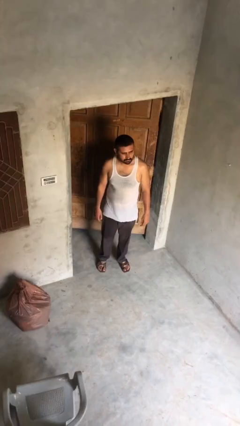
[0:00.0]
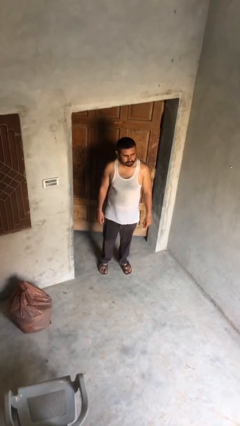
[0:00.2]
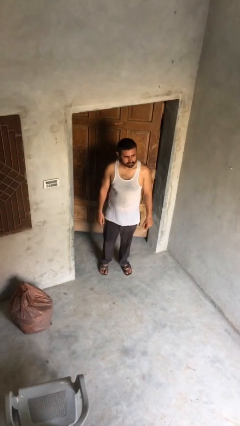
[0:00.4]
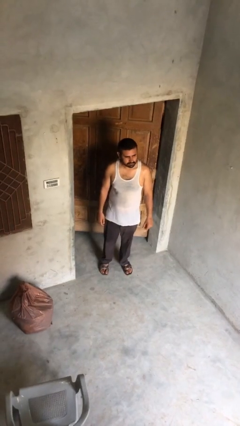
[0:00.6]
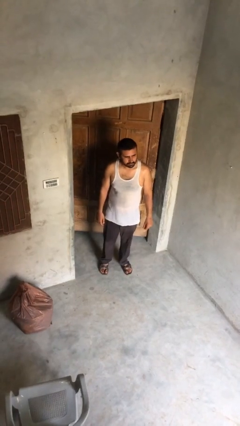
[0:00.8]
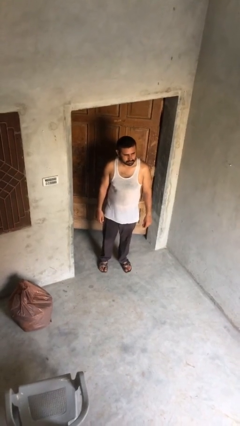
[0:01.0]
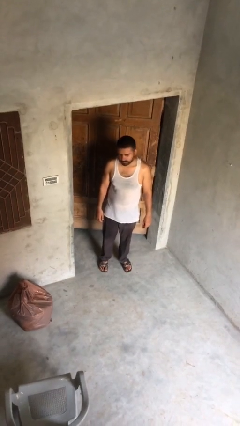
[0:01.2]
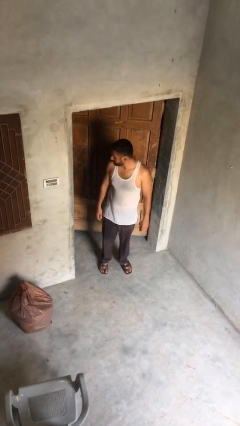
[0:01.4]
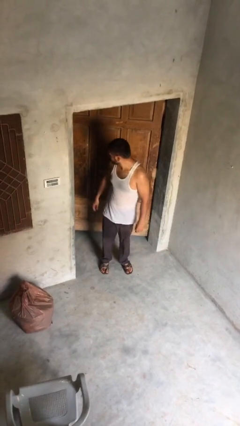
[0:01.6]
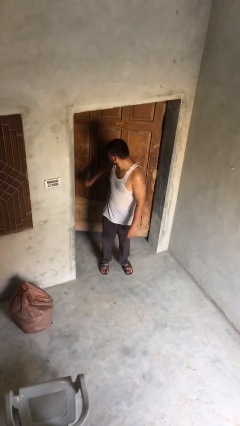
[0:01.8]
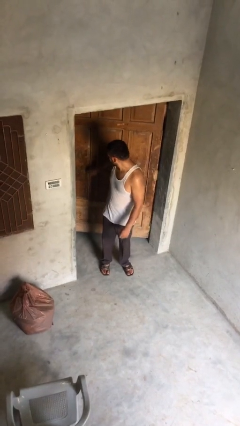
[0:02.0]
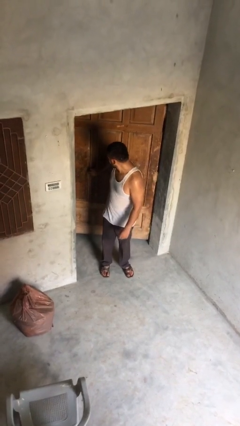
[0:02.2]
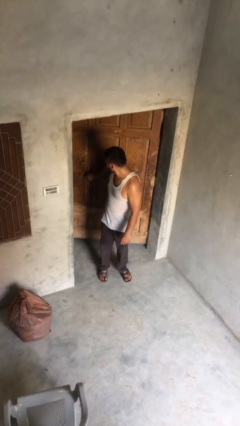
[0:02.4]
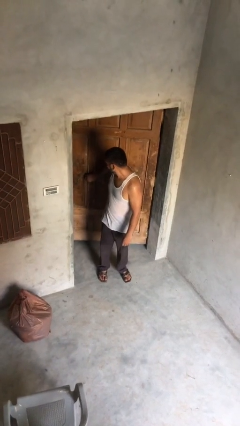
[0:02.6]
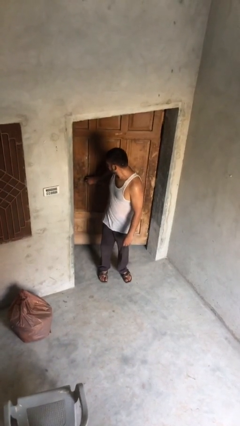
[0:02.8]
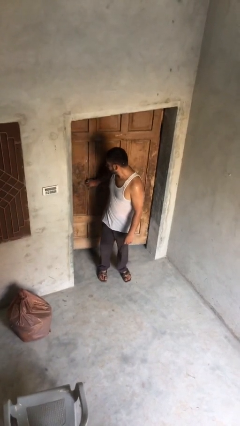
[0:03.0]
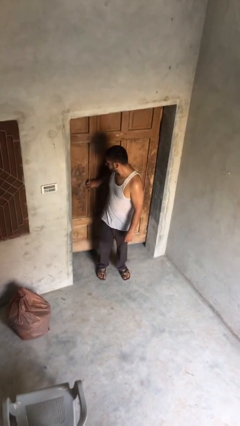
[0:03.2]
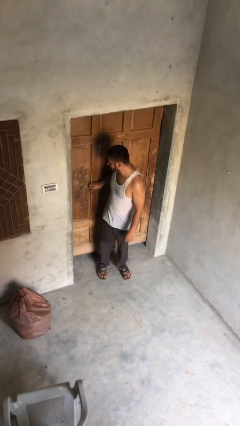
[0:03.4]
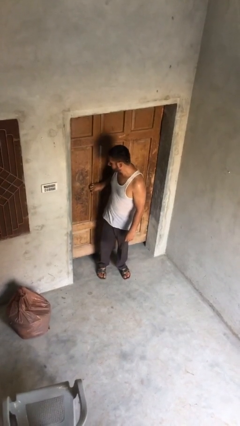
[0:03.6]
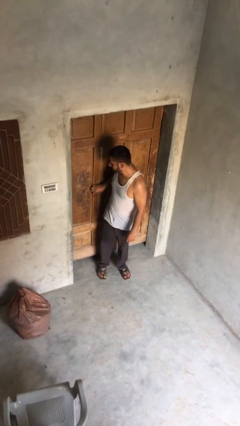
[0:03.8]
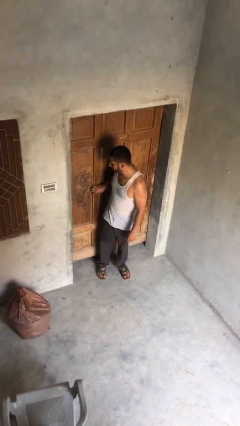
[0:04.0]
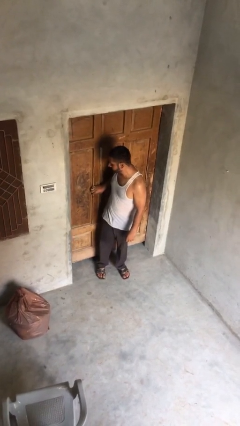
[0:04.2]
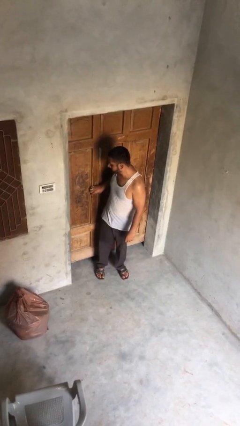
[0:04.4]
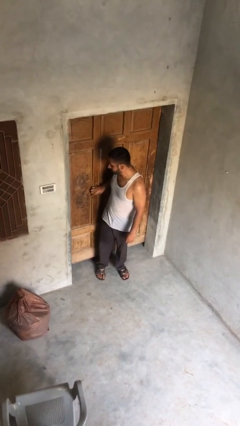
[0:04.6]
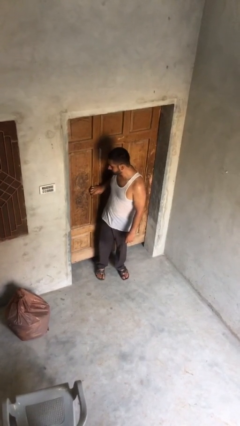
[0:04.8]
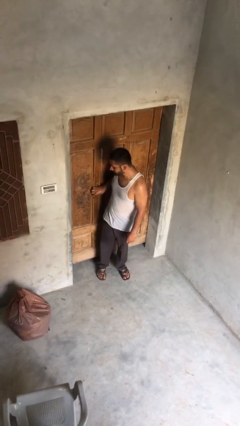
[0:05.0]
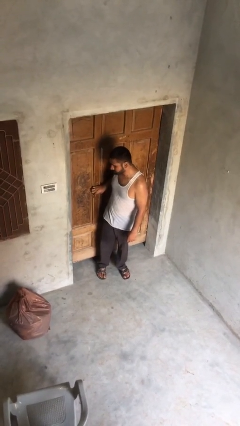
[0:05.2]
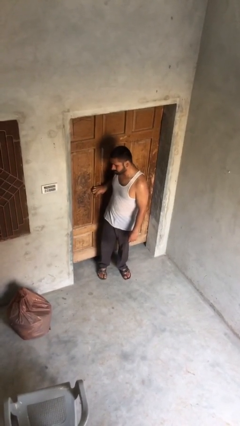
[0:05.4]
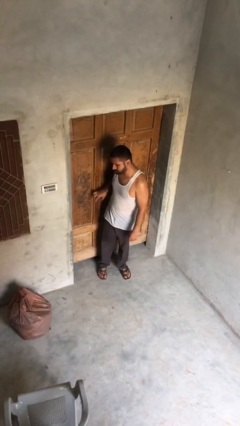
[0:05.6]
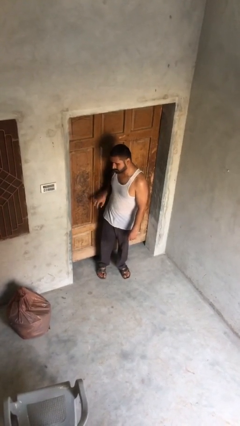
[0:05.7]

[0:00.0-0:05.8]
person closes facility door

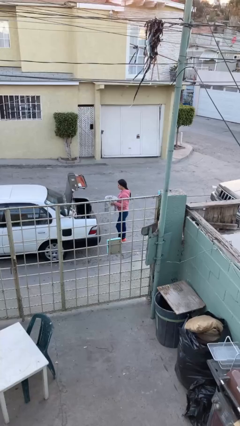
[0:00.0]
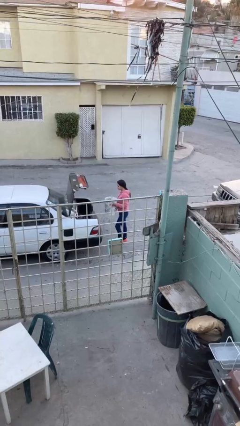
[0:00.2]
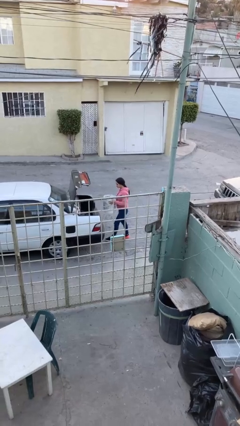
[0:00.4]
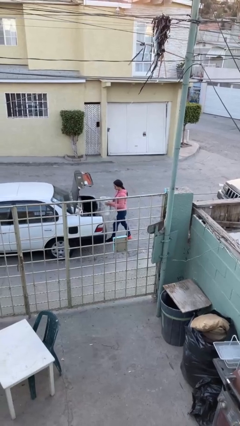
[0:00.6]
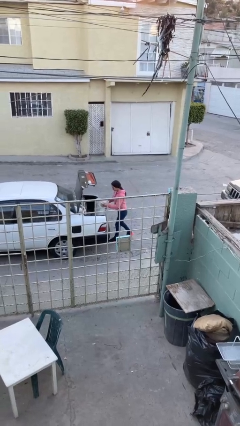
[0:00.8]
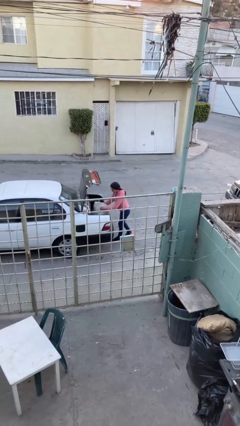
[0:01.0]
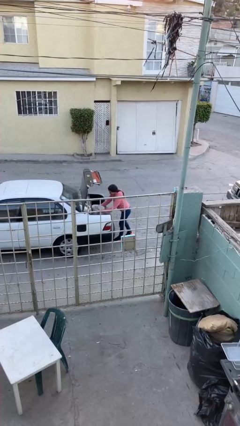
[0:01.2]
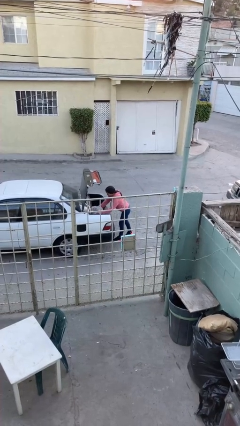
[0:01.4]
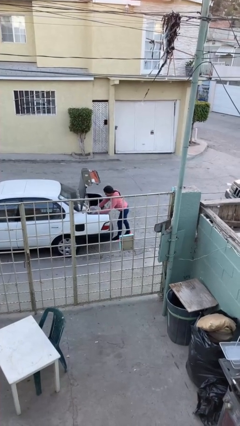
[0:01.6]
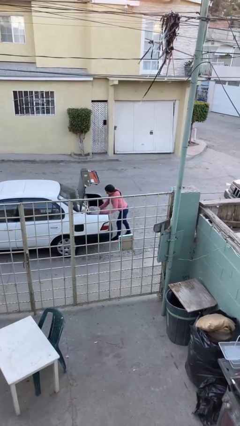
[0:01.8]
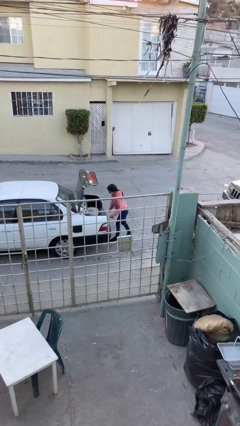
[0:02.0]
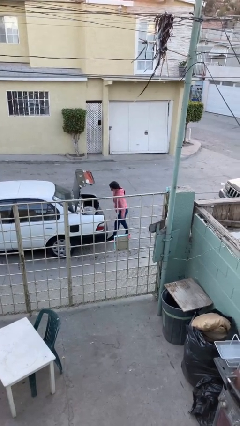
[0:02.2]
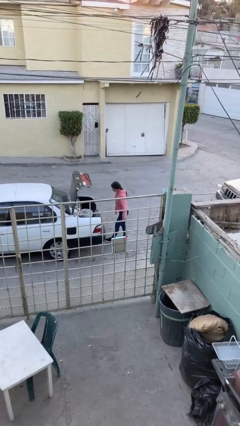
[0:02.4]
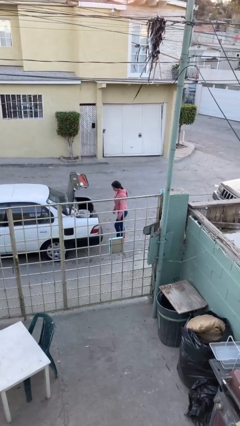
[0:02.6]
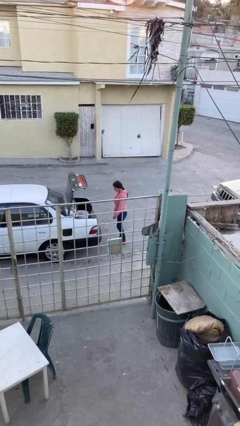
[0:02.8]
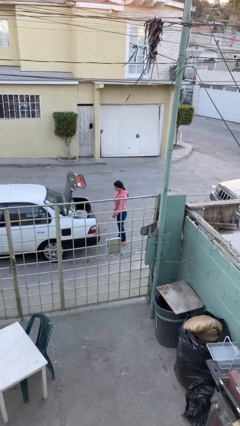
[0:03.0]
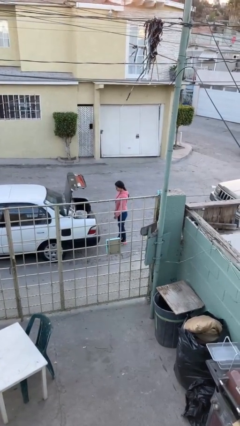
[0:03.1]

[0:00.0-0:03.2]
person loads car

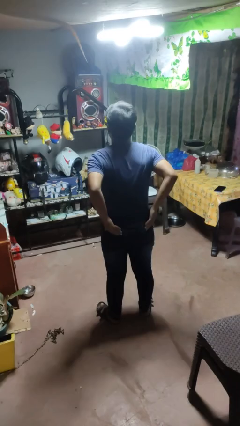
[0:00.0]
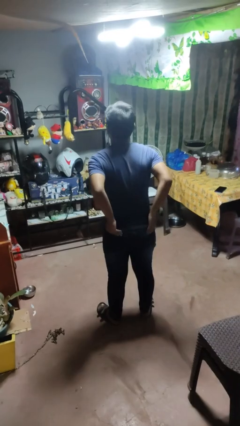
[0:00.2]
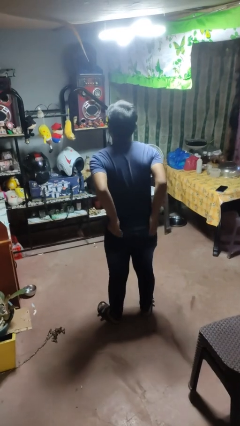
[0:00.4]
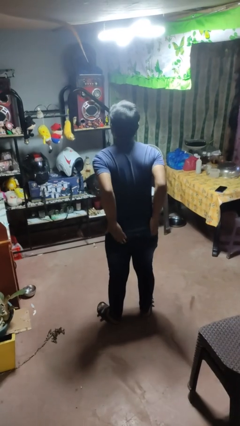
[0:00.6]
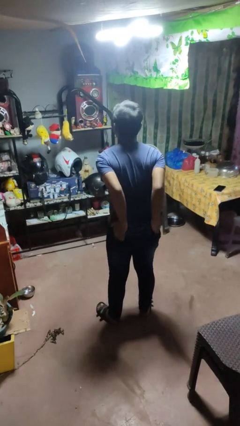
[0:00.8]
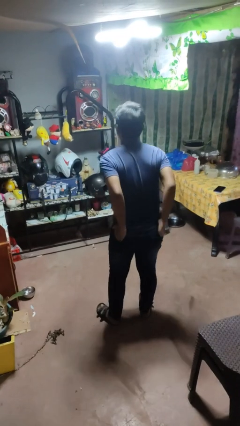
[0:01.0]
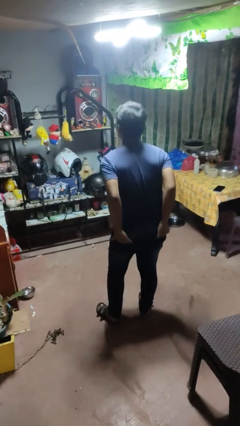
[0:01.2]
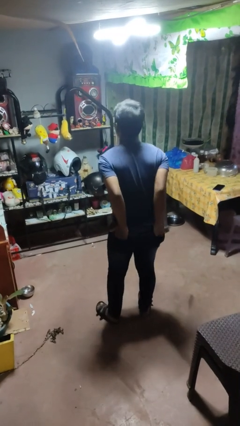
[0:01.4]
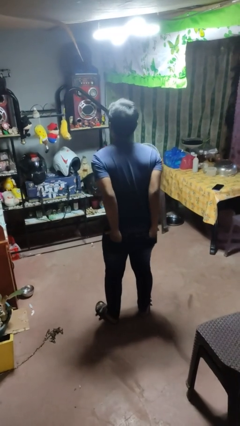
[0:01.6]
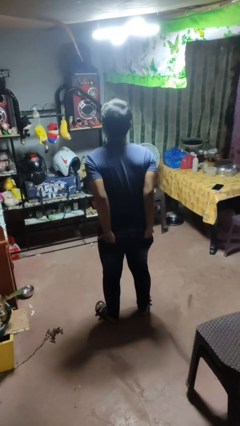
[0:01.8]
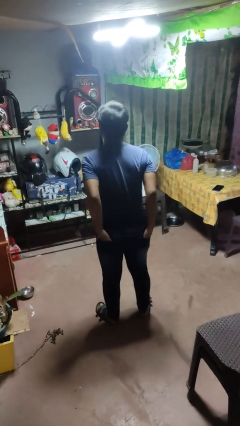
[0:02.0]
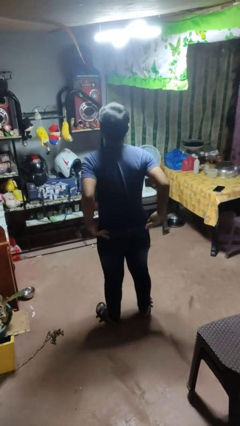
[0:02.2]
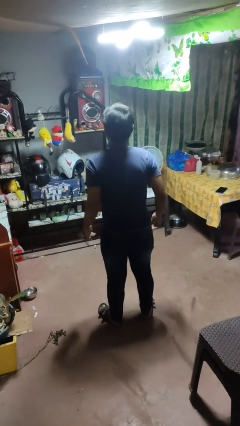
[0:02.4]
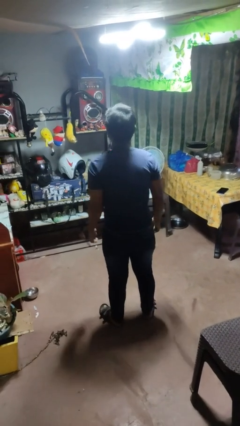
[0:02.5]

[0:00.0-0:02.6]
person puts hands in back pockets

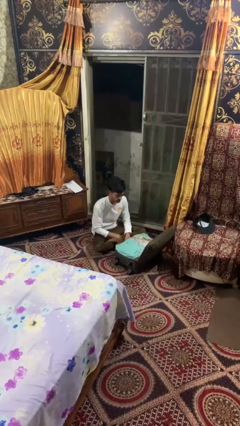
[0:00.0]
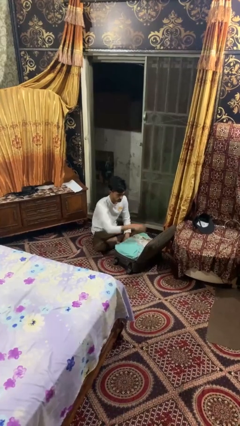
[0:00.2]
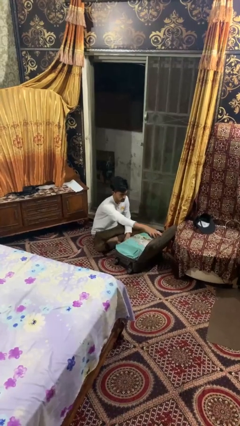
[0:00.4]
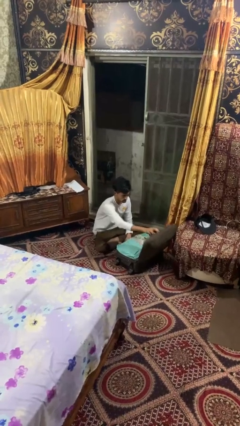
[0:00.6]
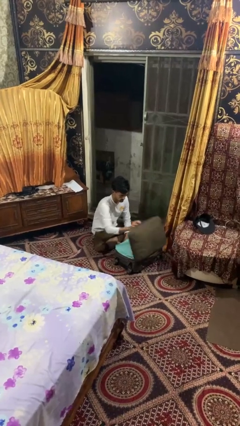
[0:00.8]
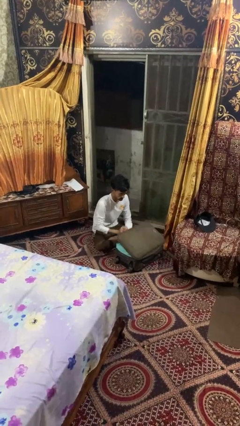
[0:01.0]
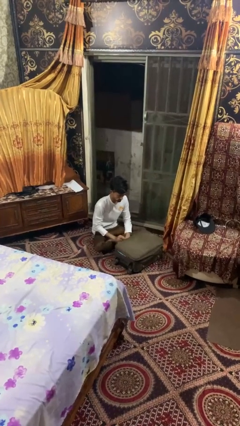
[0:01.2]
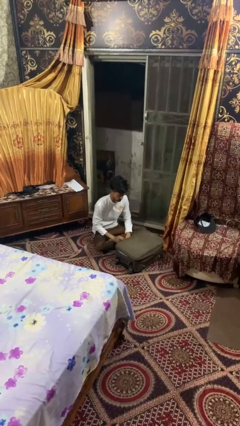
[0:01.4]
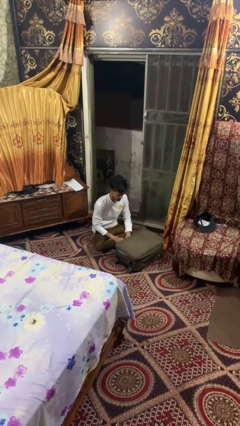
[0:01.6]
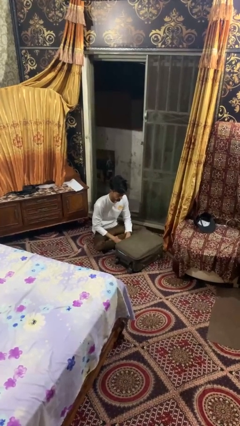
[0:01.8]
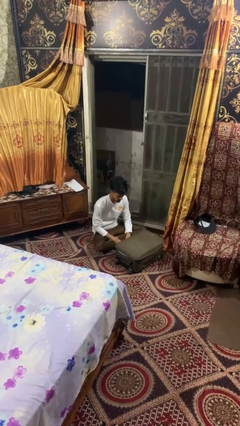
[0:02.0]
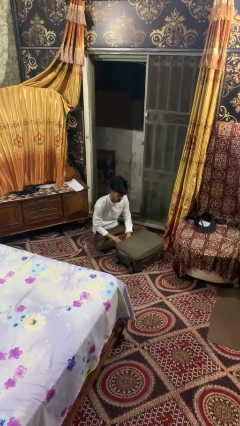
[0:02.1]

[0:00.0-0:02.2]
person closes suitcase

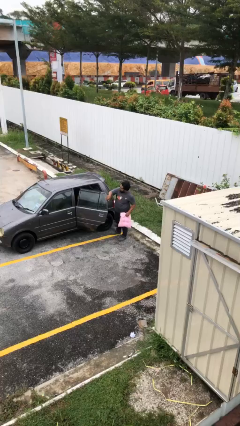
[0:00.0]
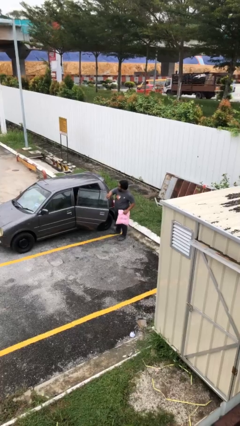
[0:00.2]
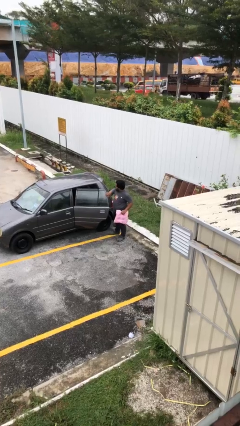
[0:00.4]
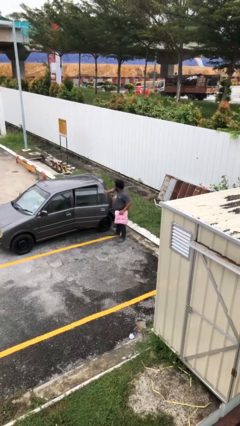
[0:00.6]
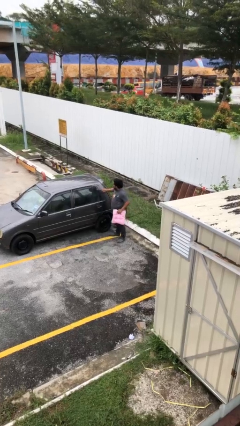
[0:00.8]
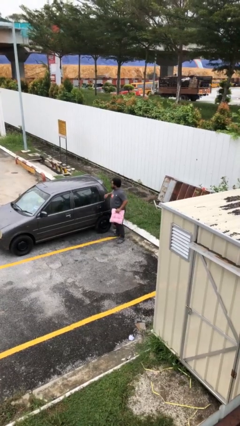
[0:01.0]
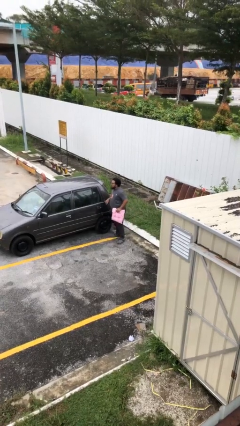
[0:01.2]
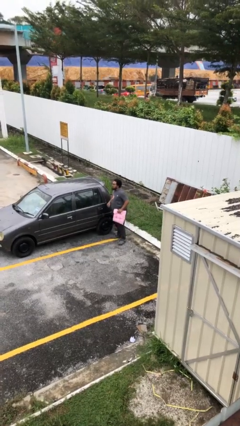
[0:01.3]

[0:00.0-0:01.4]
person closes car door

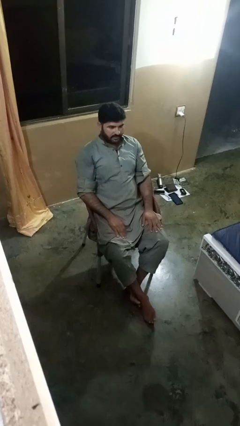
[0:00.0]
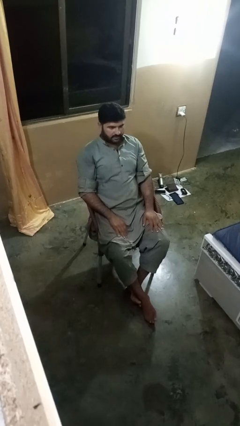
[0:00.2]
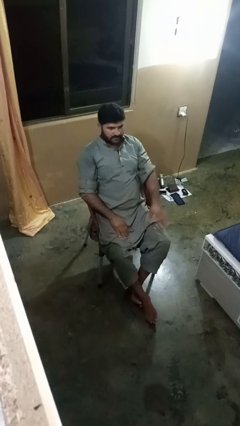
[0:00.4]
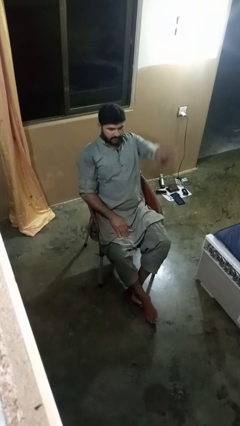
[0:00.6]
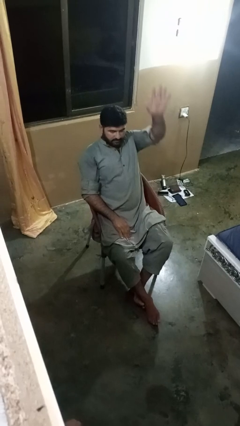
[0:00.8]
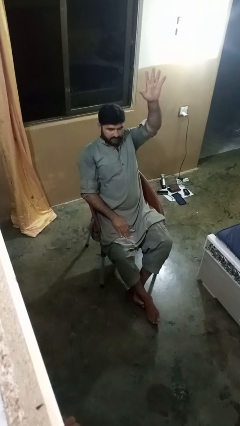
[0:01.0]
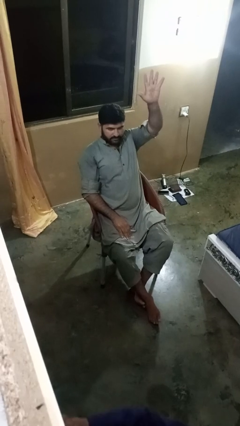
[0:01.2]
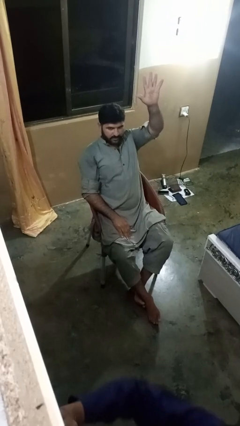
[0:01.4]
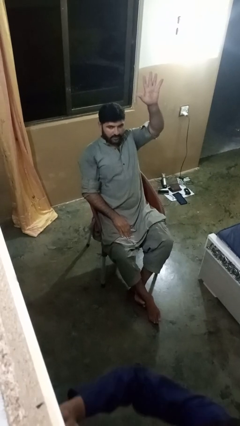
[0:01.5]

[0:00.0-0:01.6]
person gestures number five

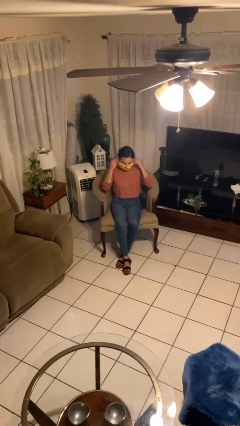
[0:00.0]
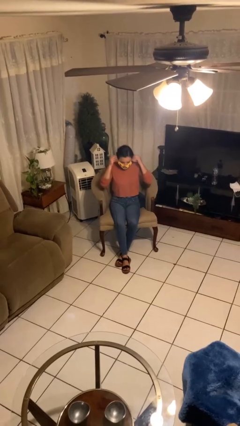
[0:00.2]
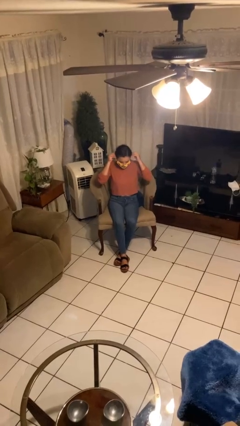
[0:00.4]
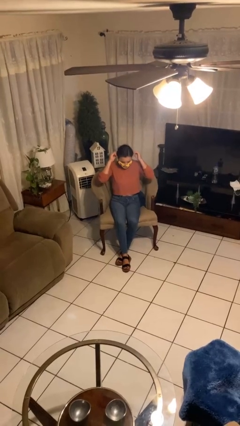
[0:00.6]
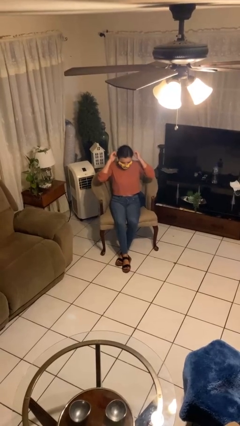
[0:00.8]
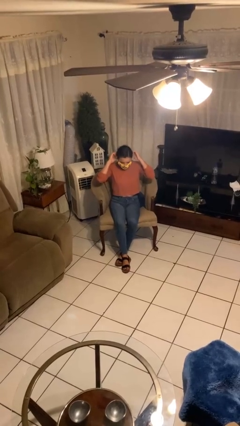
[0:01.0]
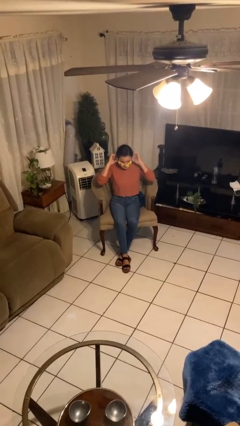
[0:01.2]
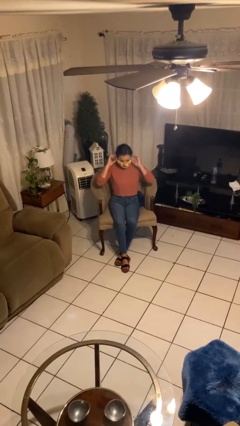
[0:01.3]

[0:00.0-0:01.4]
person puts on facemask
